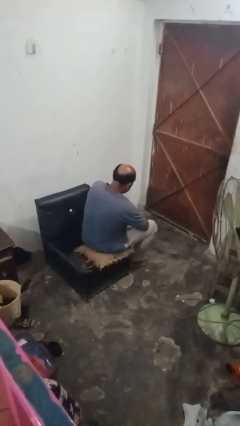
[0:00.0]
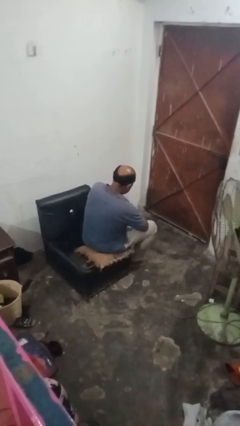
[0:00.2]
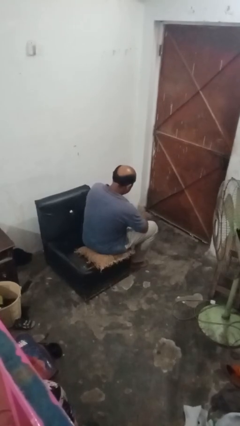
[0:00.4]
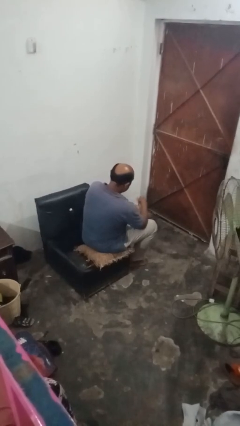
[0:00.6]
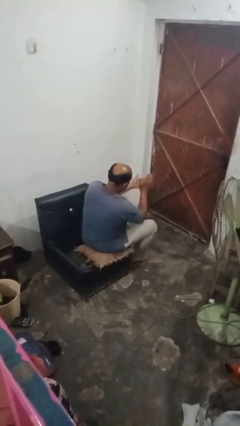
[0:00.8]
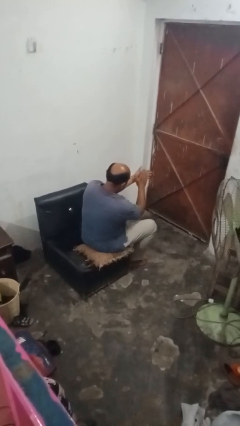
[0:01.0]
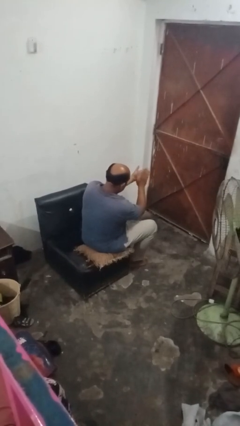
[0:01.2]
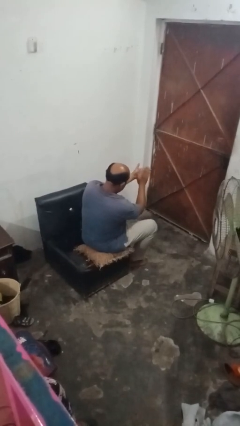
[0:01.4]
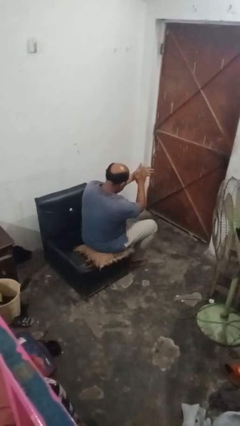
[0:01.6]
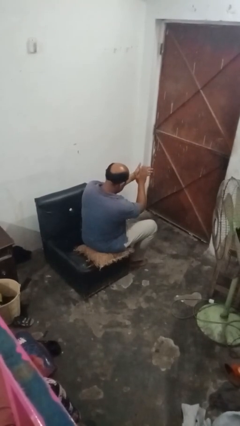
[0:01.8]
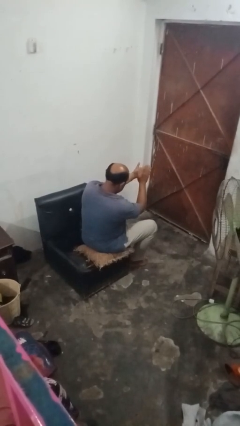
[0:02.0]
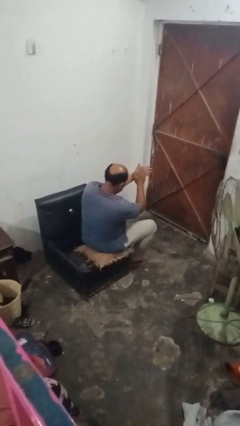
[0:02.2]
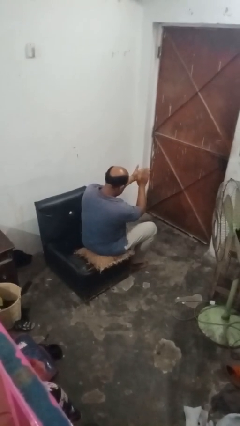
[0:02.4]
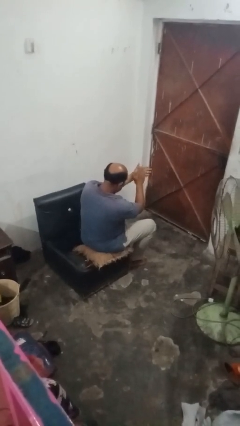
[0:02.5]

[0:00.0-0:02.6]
person claps hands

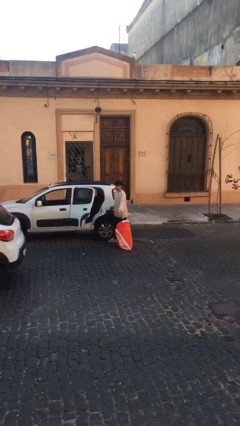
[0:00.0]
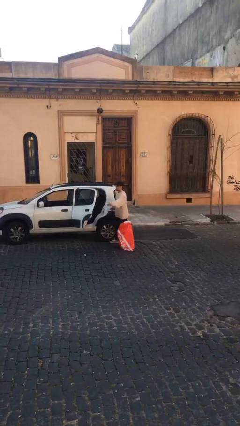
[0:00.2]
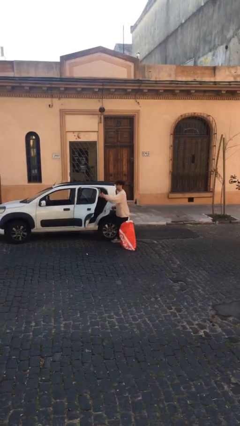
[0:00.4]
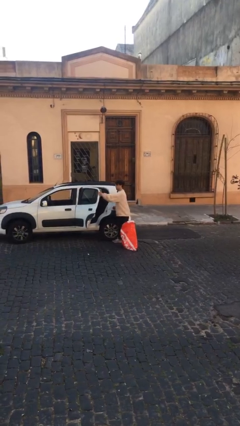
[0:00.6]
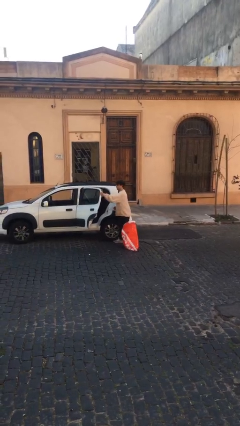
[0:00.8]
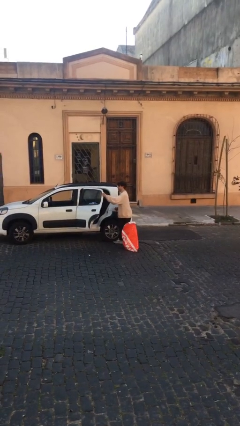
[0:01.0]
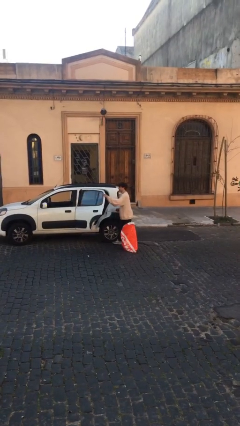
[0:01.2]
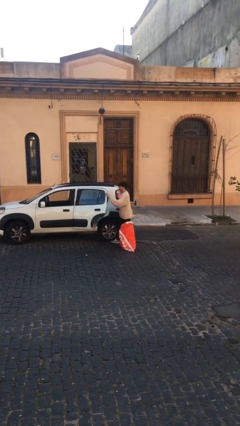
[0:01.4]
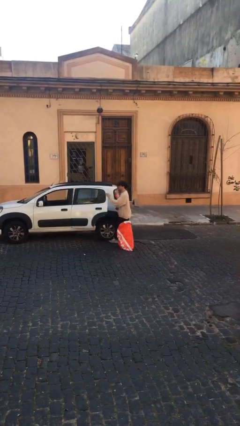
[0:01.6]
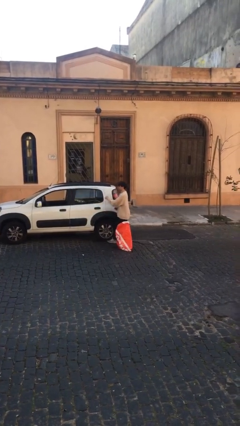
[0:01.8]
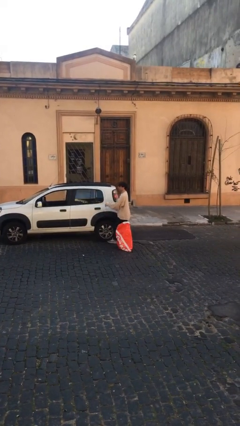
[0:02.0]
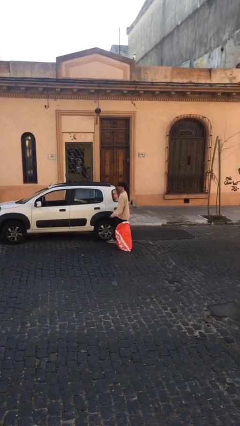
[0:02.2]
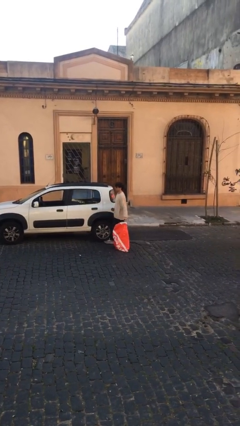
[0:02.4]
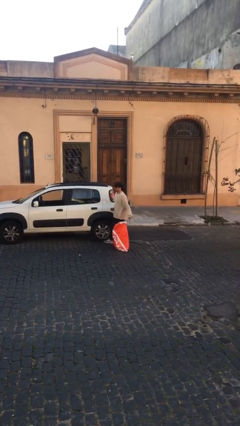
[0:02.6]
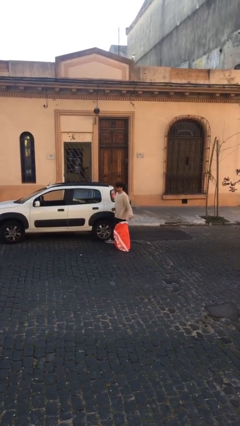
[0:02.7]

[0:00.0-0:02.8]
person closes car door

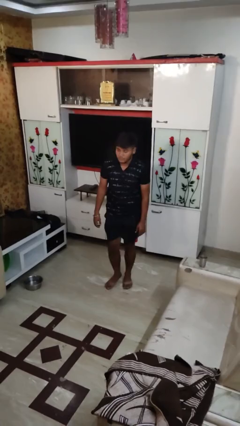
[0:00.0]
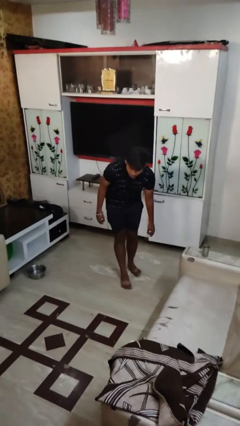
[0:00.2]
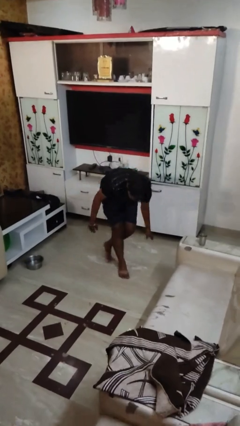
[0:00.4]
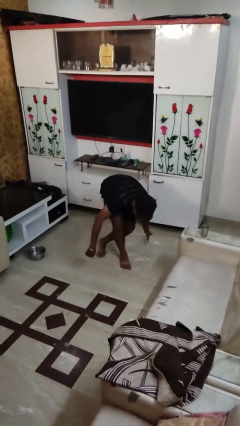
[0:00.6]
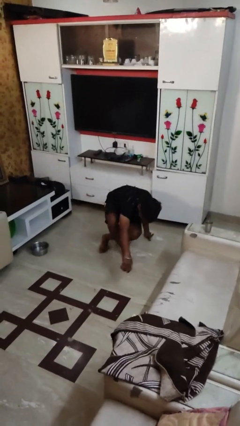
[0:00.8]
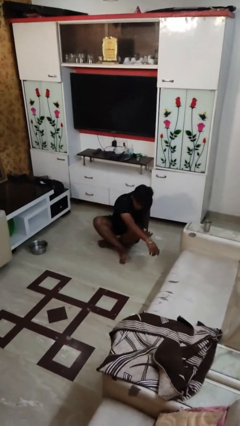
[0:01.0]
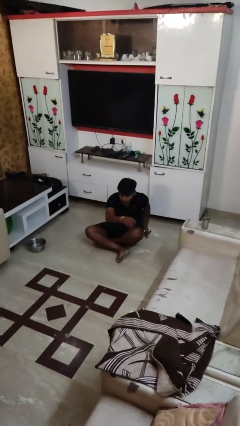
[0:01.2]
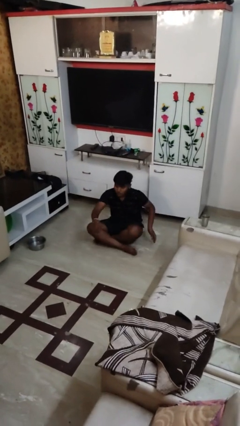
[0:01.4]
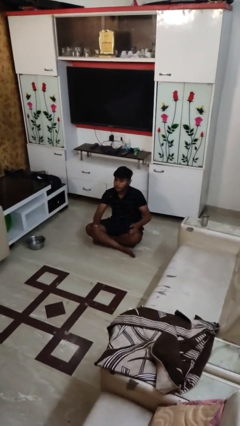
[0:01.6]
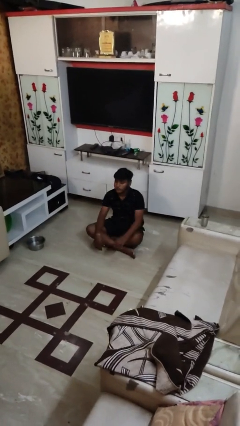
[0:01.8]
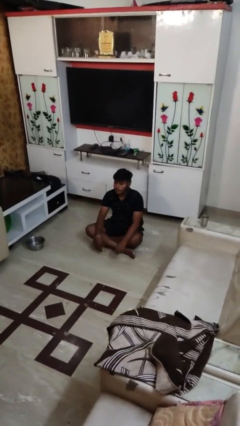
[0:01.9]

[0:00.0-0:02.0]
person sits crisscross

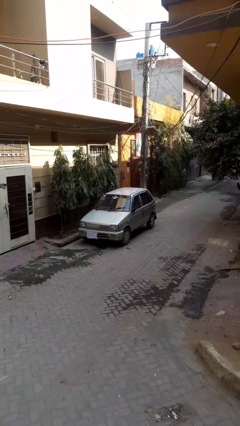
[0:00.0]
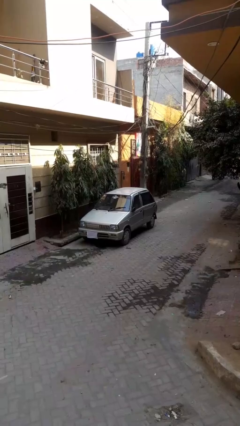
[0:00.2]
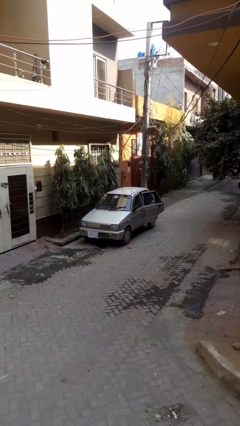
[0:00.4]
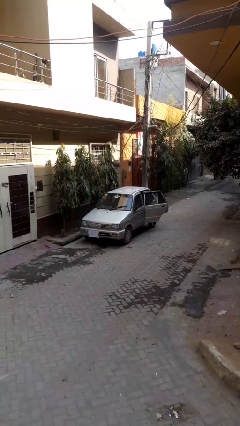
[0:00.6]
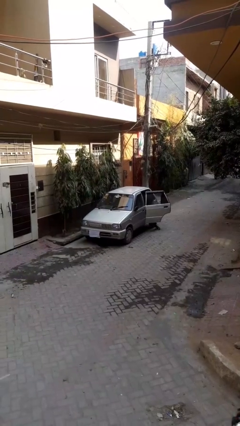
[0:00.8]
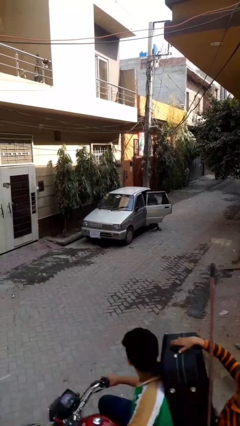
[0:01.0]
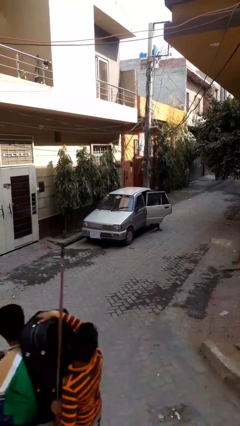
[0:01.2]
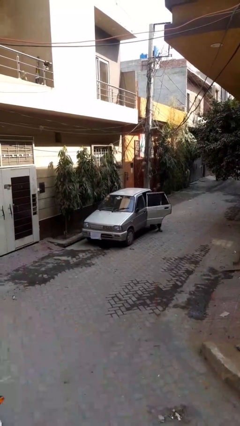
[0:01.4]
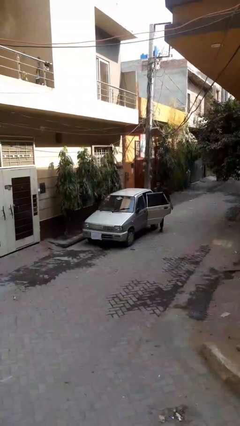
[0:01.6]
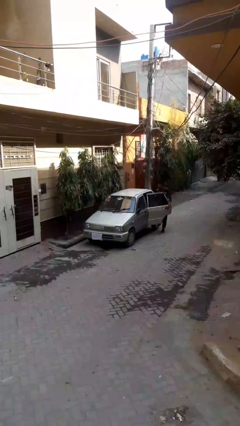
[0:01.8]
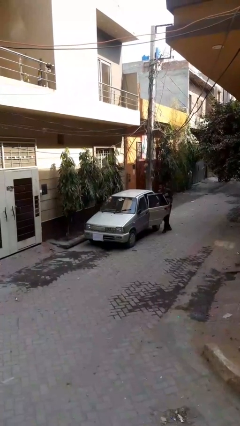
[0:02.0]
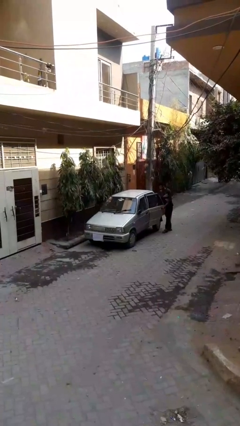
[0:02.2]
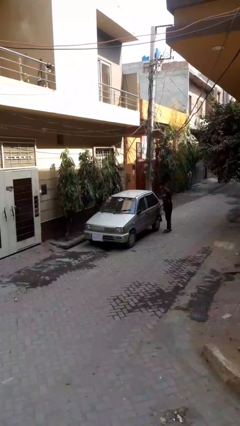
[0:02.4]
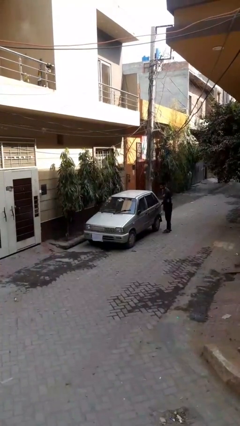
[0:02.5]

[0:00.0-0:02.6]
car drops off person

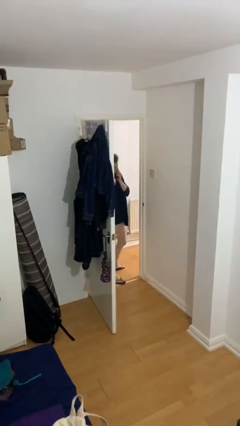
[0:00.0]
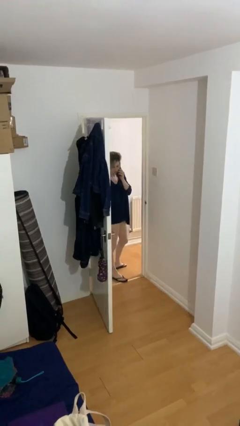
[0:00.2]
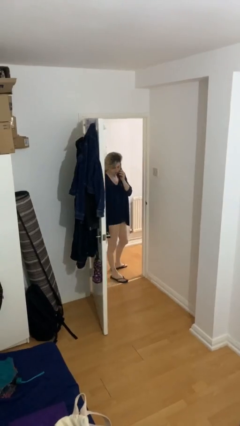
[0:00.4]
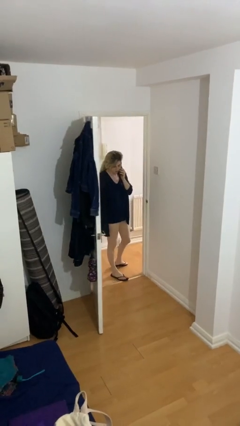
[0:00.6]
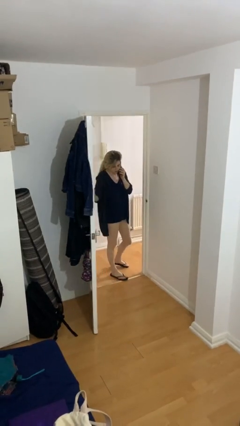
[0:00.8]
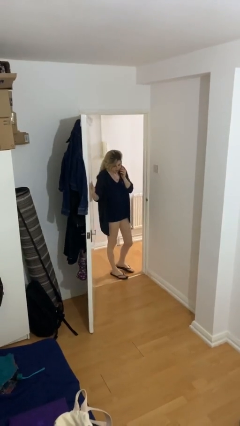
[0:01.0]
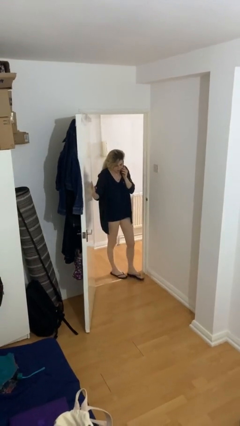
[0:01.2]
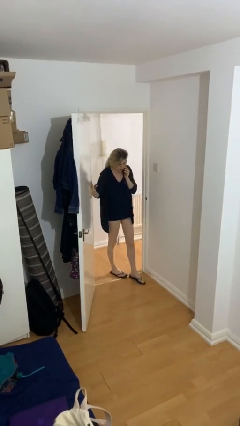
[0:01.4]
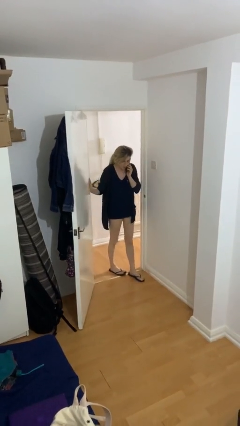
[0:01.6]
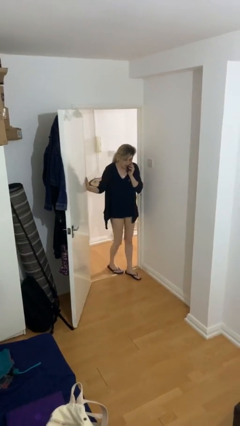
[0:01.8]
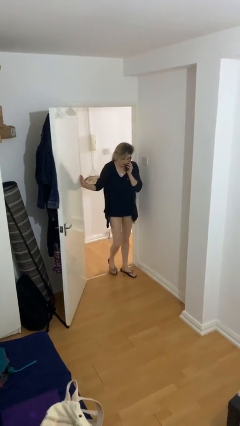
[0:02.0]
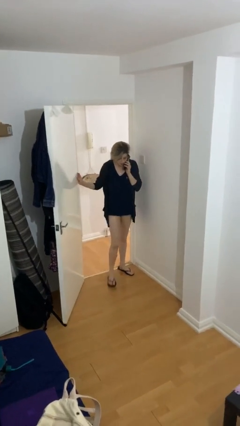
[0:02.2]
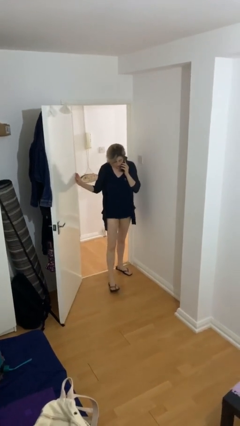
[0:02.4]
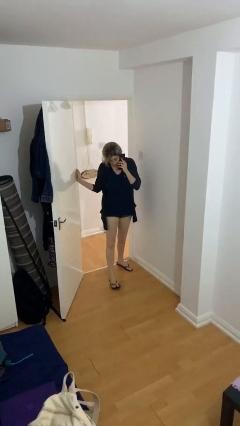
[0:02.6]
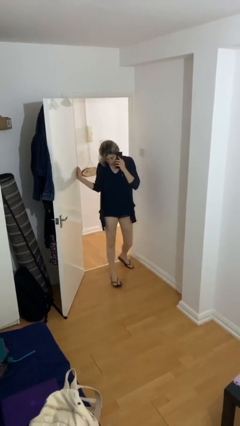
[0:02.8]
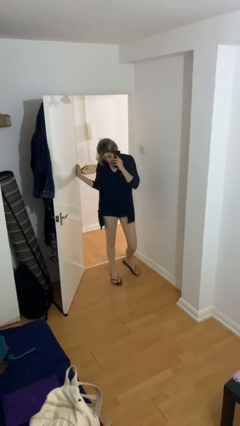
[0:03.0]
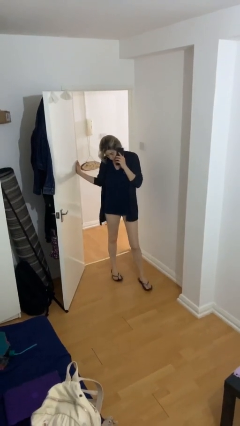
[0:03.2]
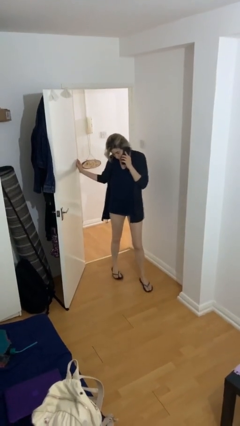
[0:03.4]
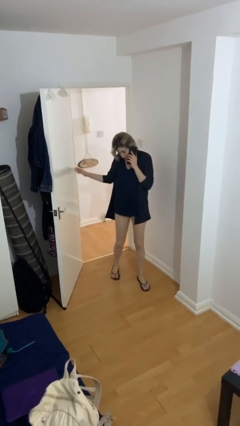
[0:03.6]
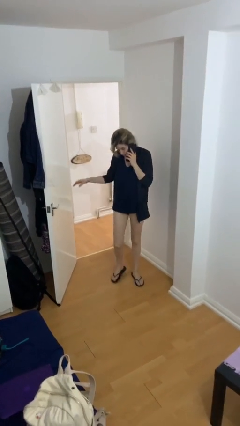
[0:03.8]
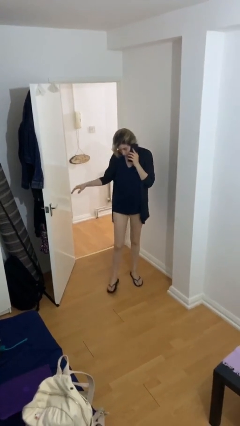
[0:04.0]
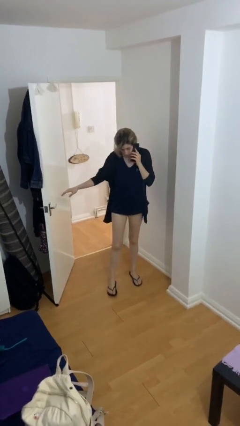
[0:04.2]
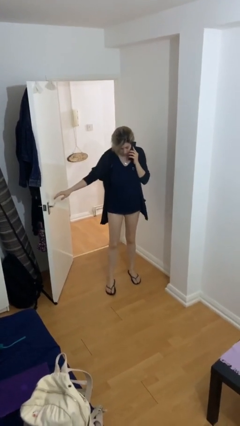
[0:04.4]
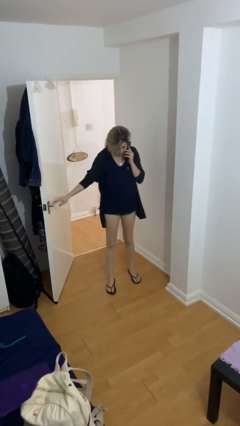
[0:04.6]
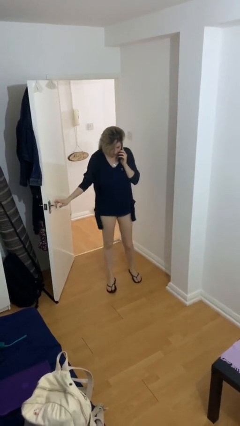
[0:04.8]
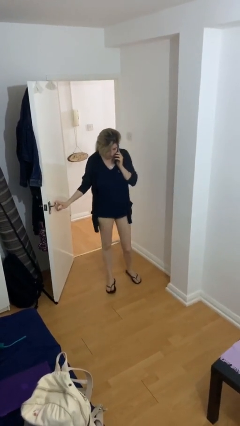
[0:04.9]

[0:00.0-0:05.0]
person enters scene through structure

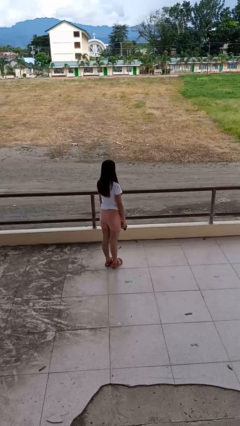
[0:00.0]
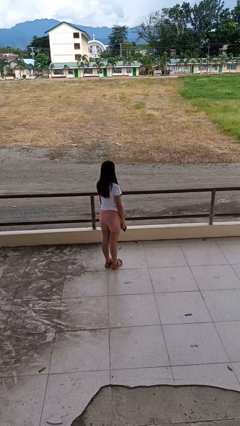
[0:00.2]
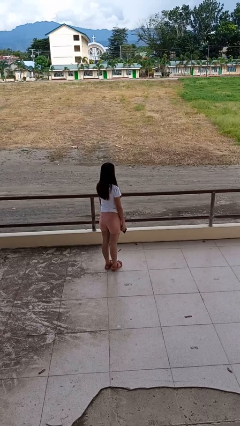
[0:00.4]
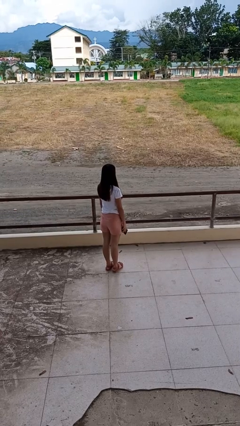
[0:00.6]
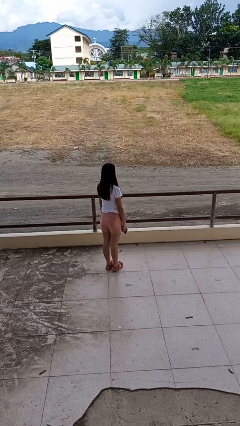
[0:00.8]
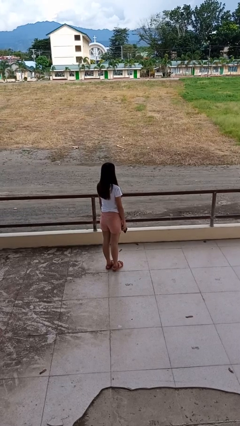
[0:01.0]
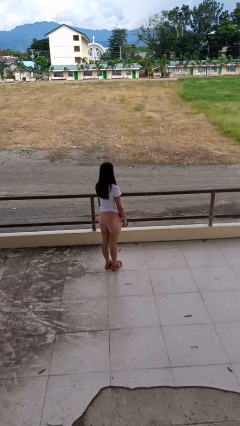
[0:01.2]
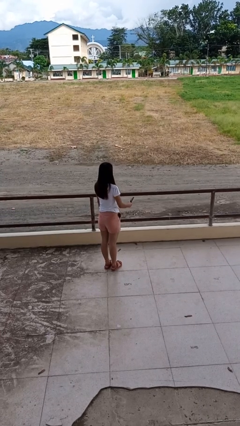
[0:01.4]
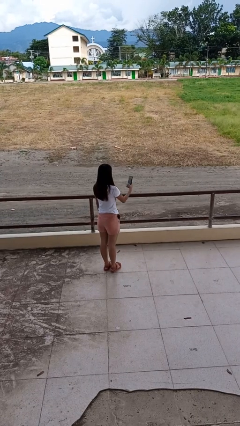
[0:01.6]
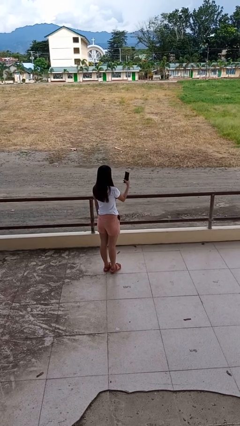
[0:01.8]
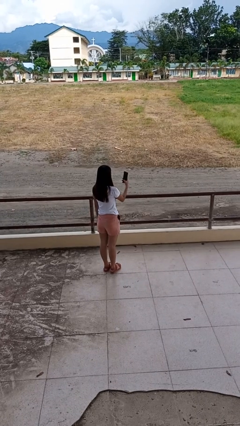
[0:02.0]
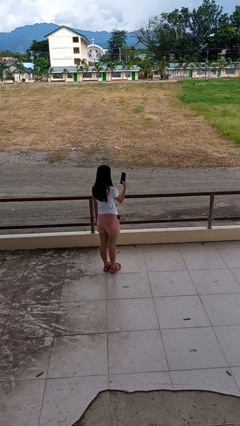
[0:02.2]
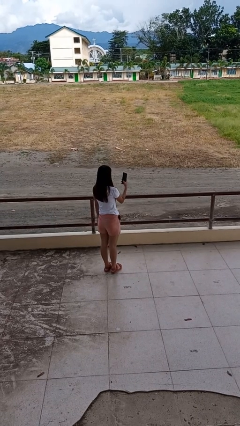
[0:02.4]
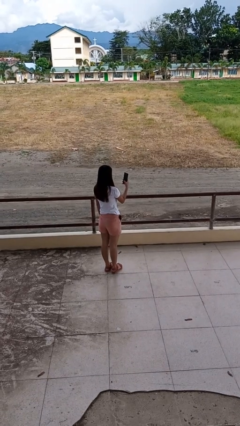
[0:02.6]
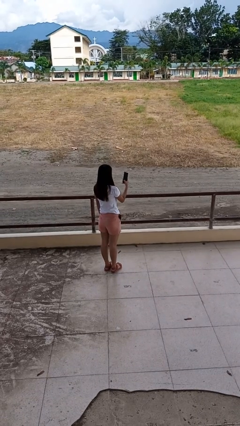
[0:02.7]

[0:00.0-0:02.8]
person takes selfie
